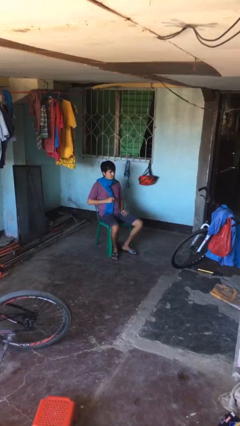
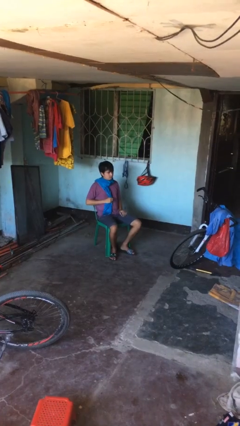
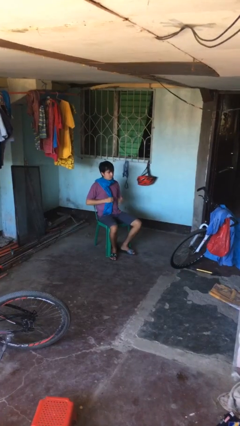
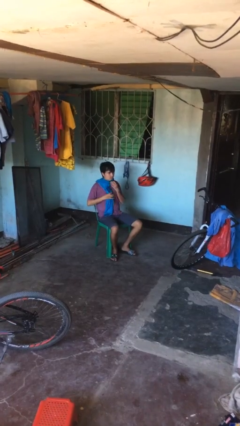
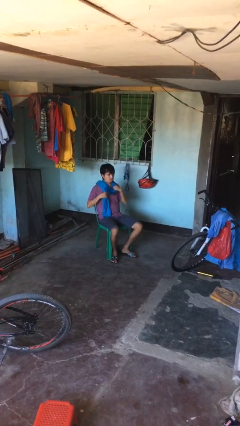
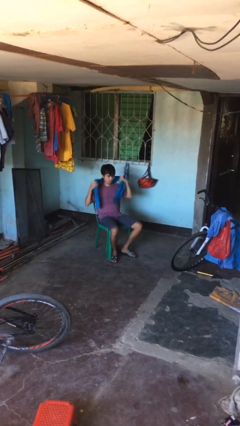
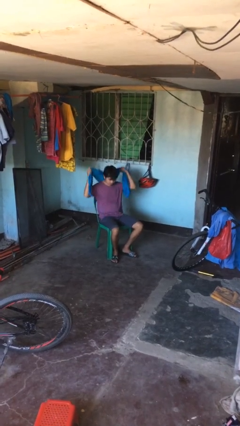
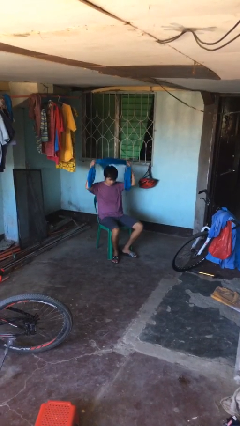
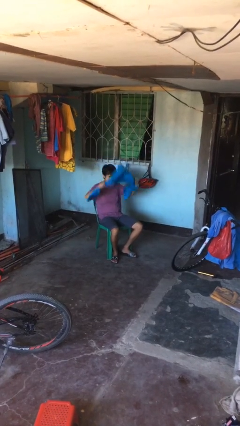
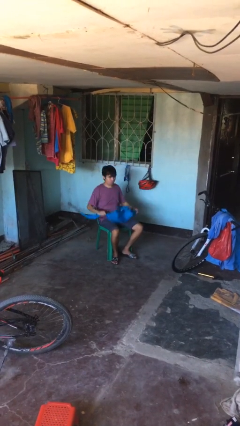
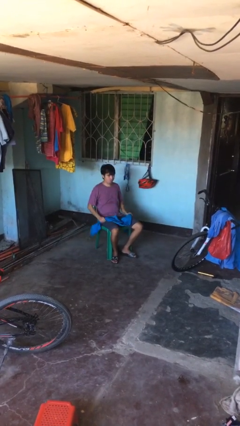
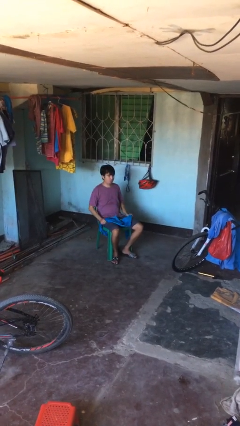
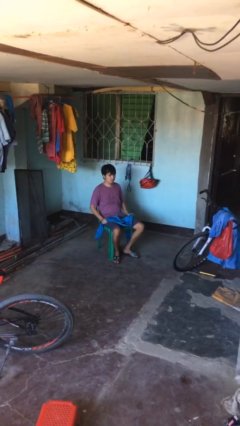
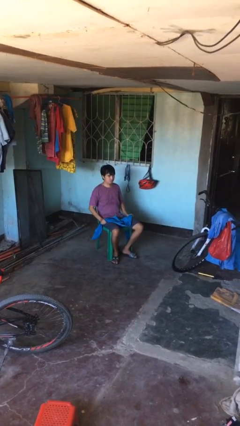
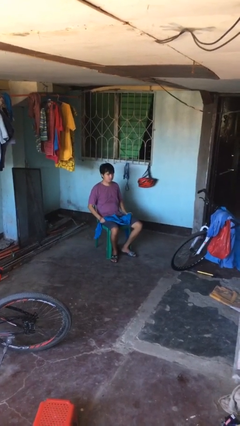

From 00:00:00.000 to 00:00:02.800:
person takes off scarf

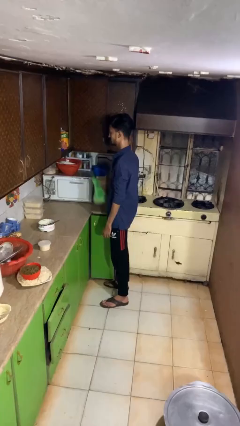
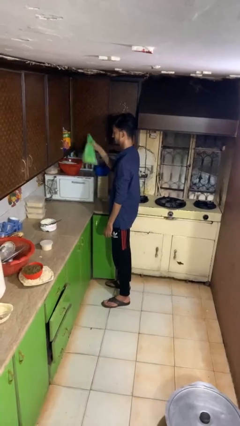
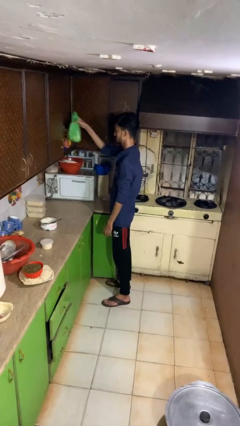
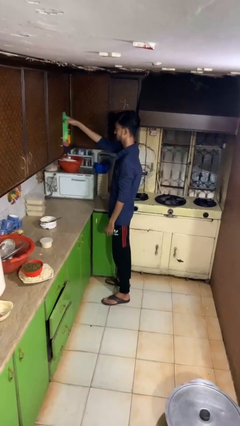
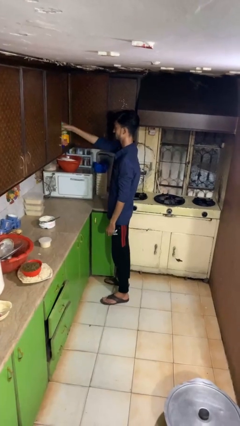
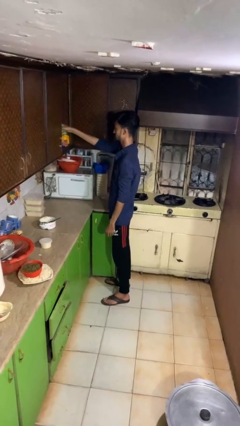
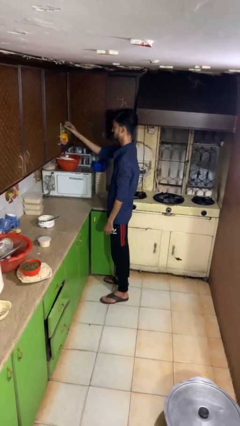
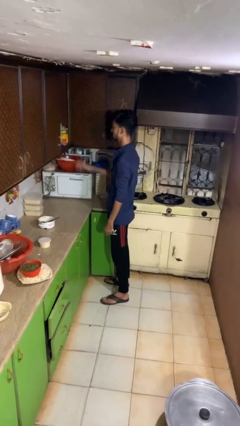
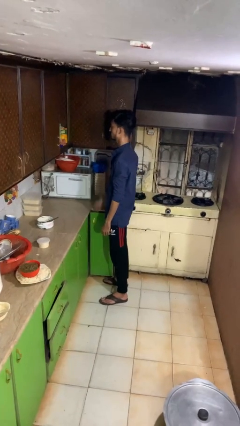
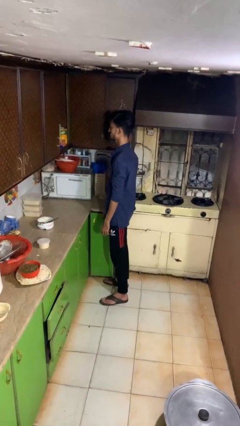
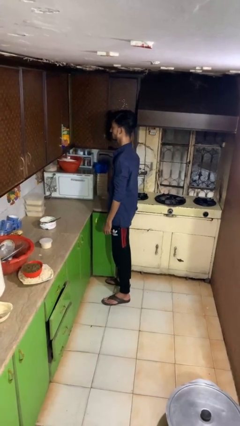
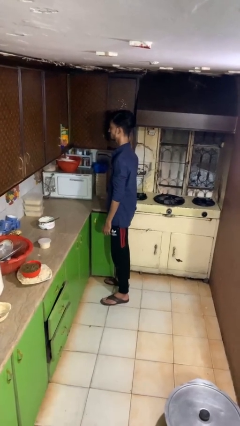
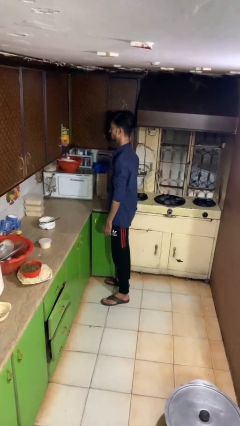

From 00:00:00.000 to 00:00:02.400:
person loads groceries into cabinet

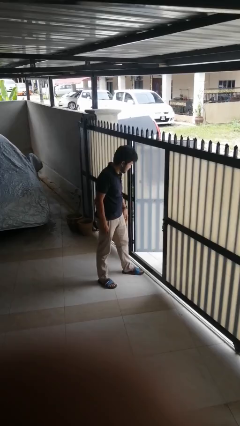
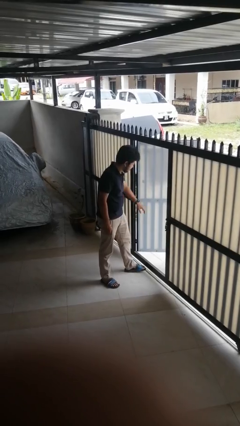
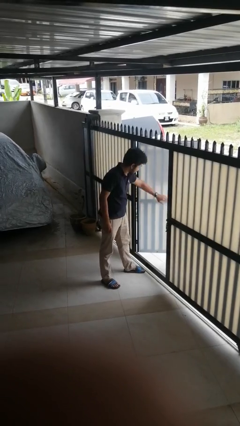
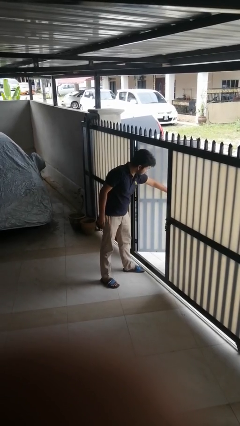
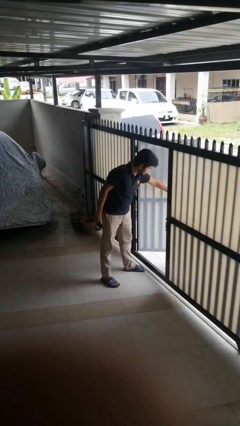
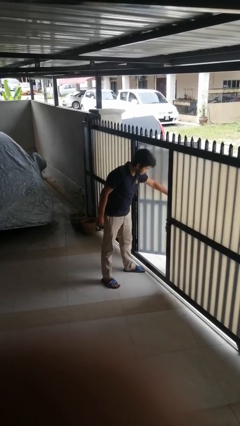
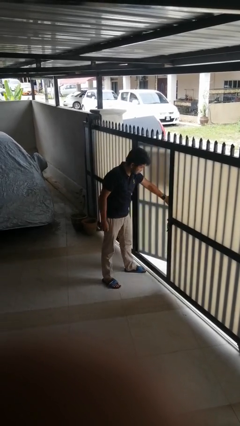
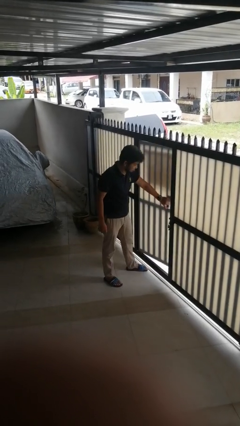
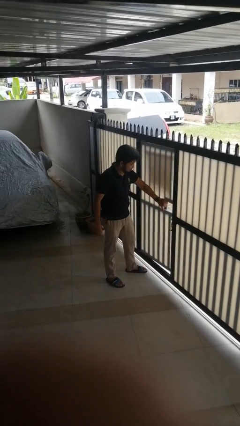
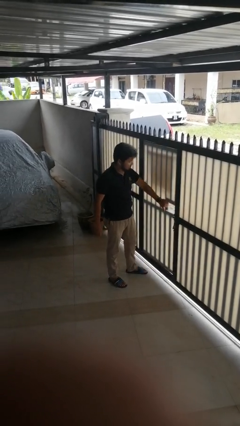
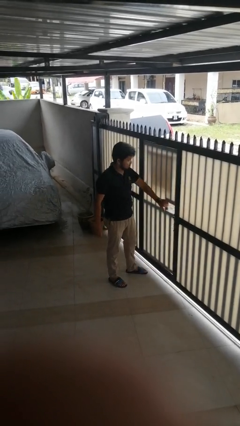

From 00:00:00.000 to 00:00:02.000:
person closes gate

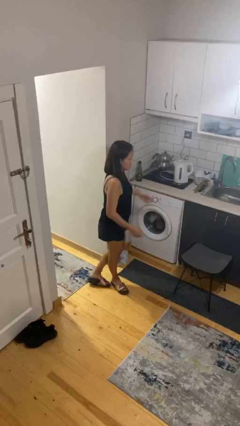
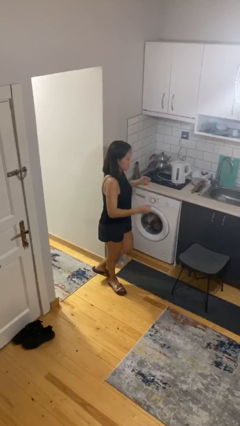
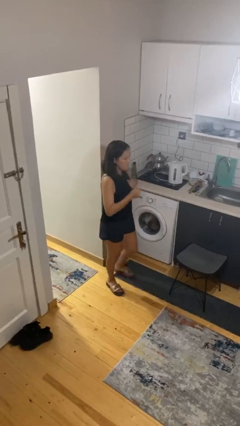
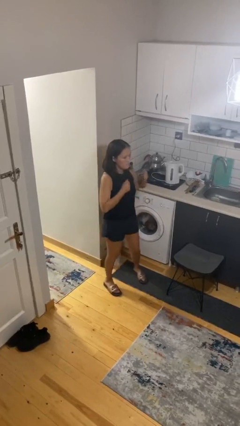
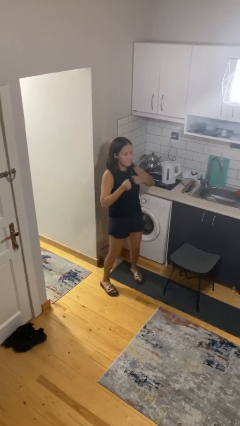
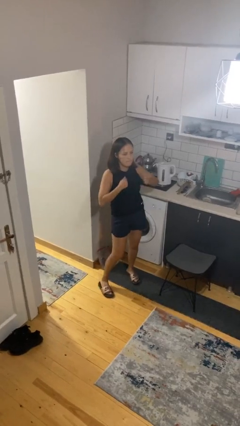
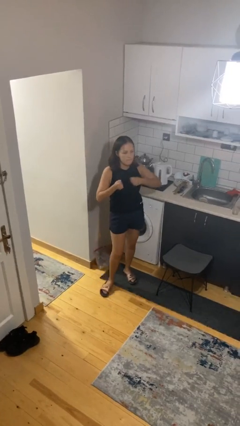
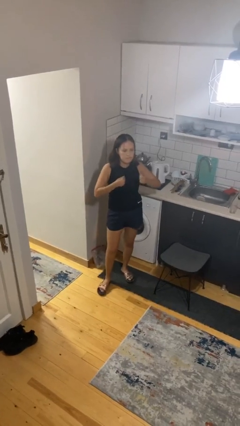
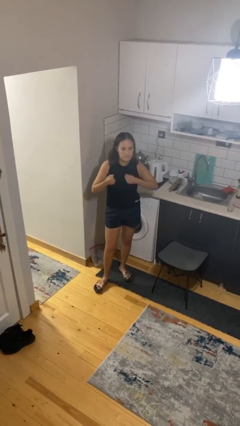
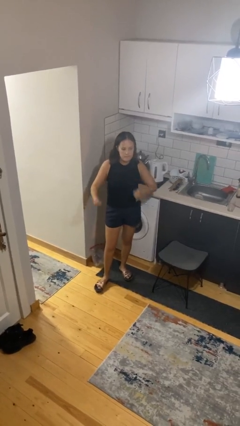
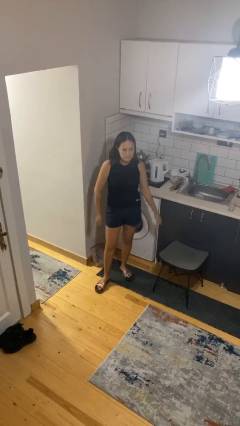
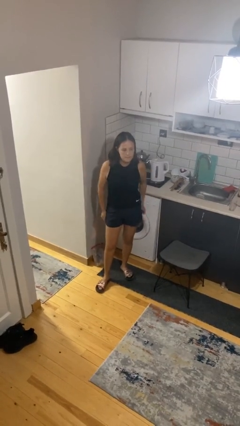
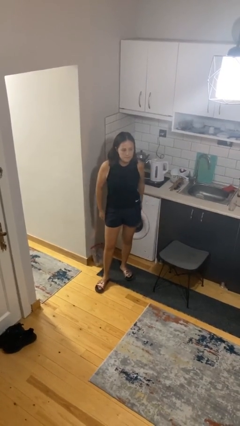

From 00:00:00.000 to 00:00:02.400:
person drums on chest

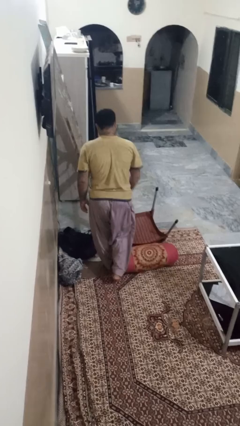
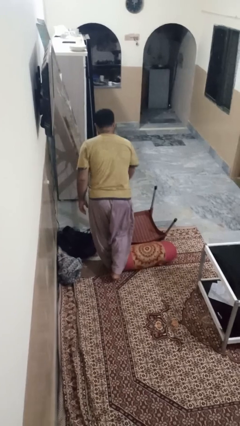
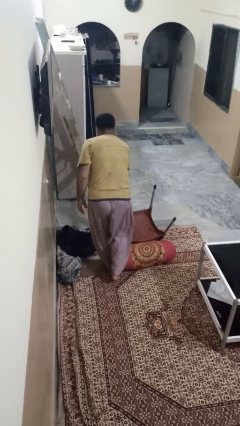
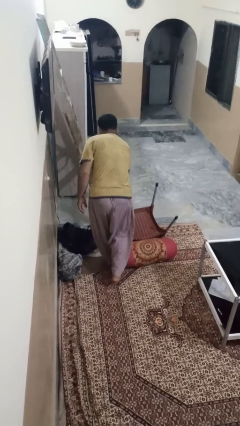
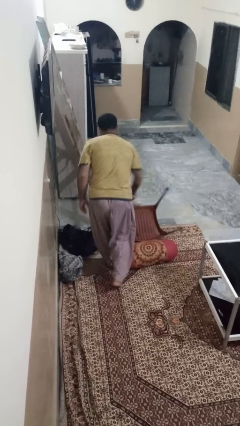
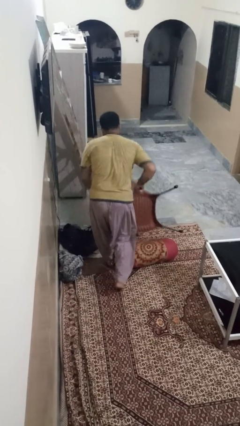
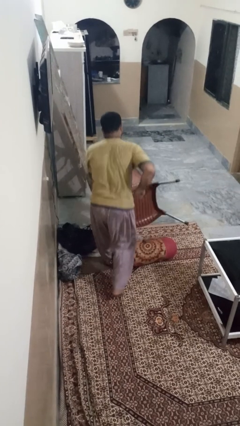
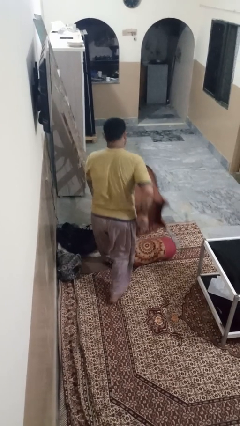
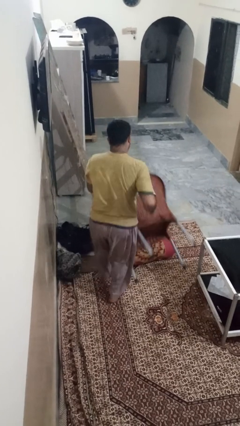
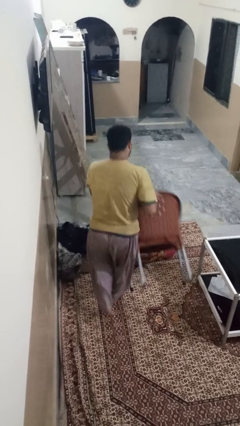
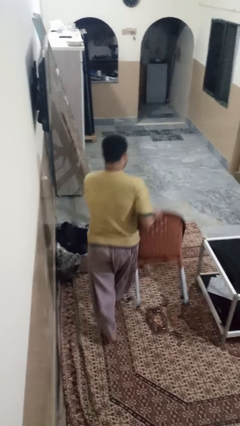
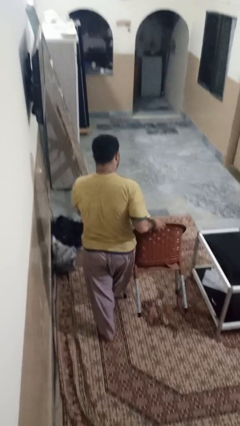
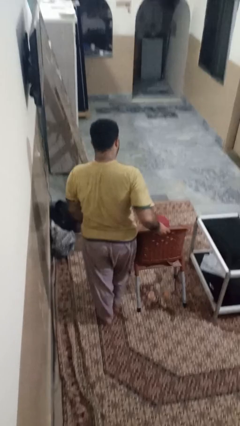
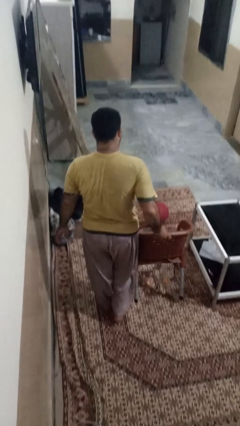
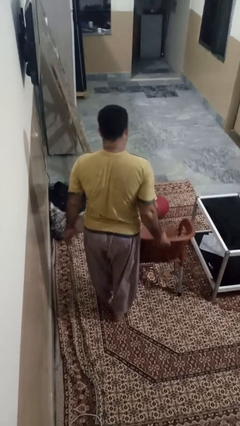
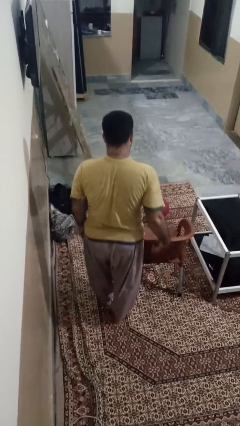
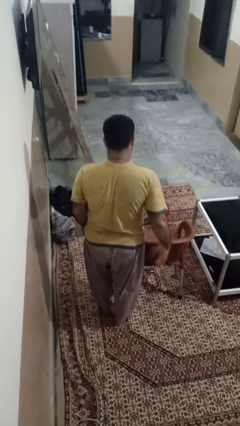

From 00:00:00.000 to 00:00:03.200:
person sets upright furniture

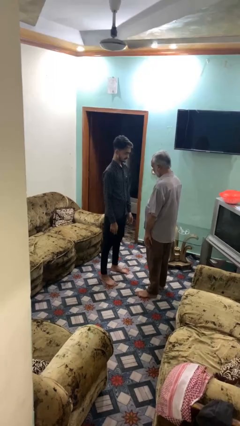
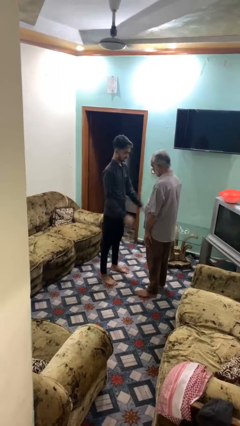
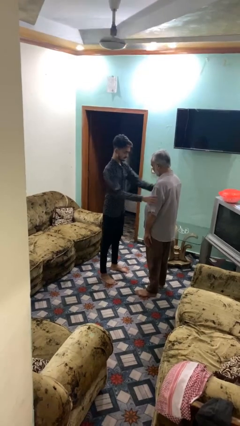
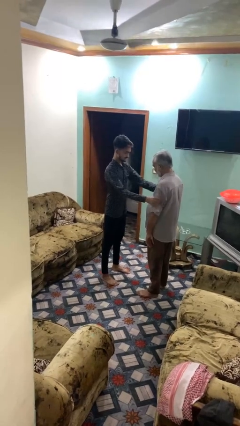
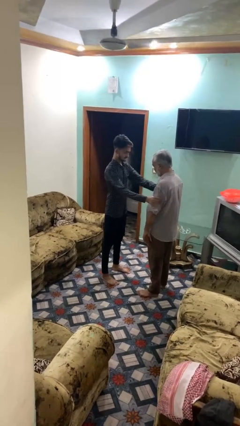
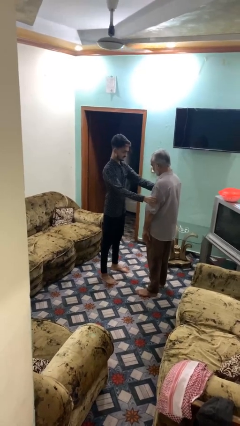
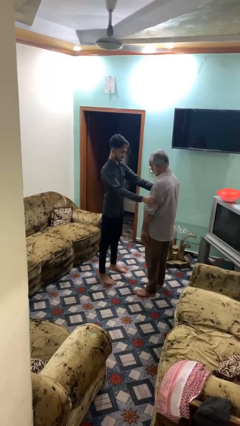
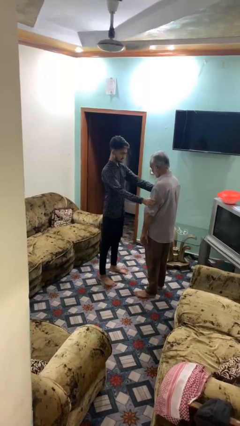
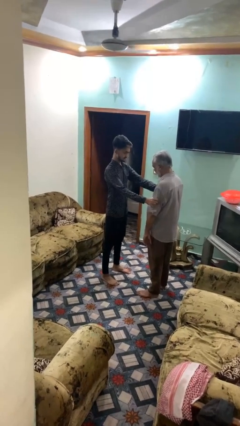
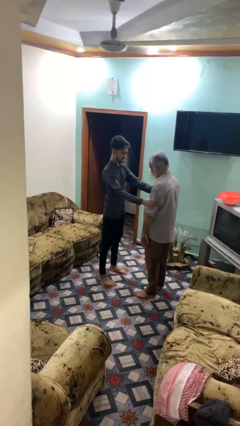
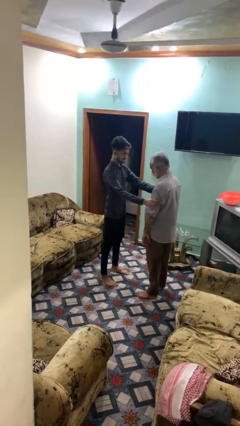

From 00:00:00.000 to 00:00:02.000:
person grabs person by bicep

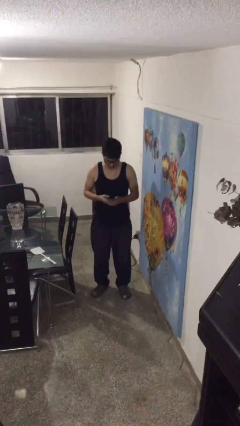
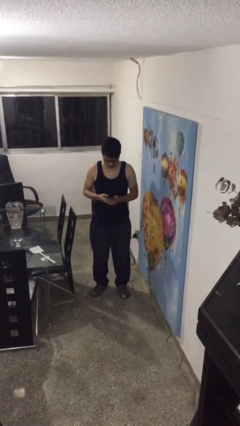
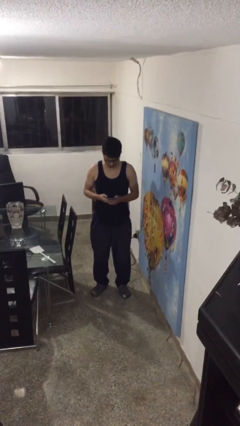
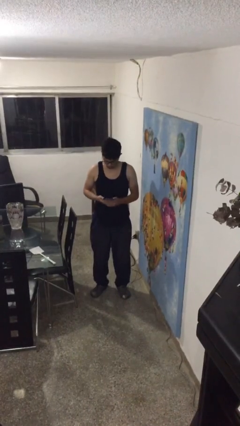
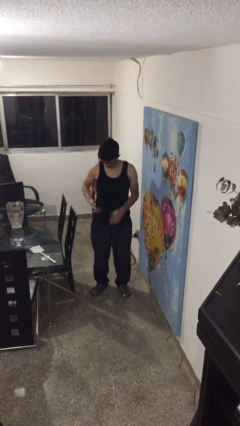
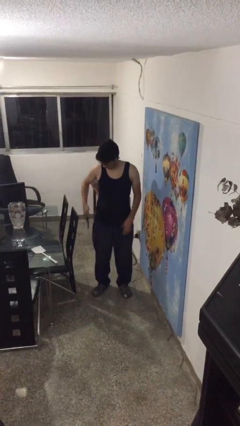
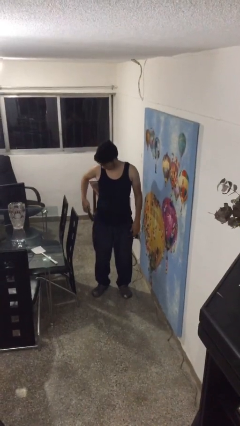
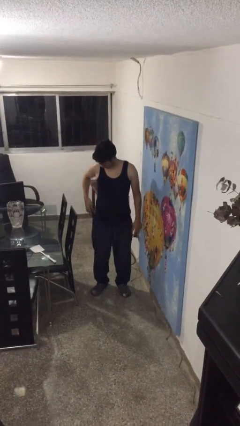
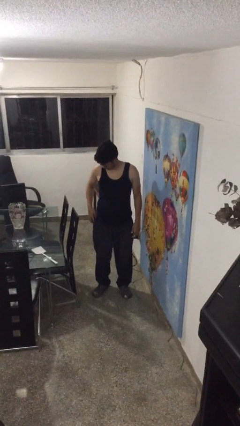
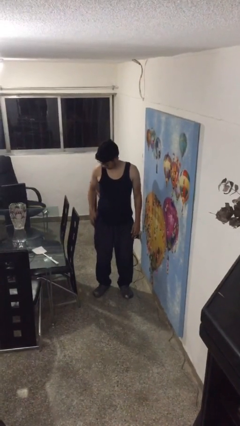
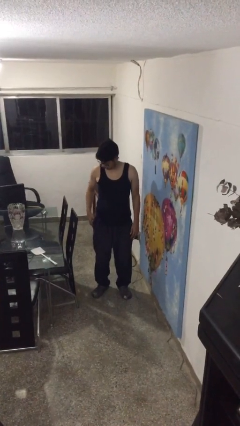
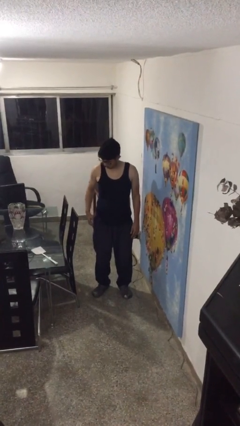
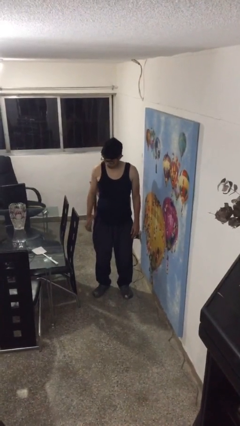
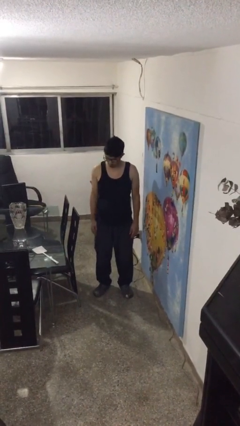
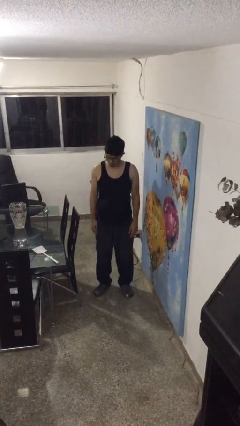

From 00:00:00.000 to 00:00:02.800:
person puts phone into pocket
